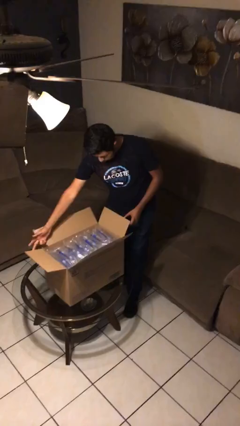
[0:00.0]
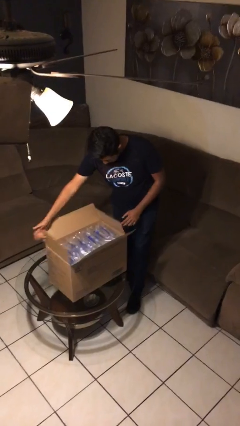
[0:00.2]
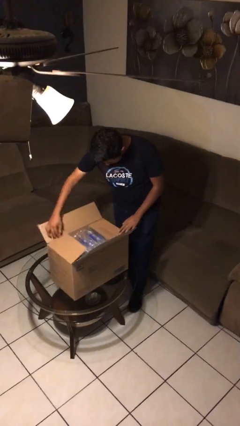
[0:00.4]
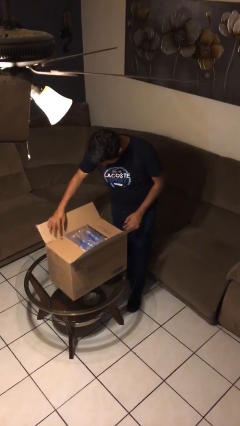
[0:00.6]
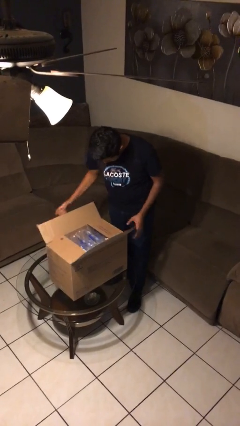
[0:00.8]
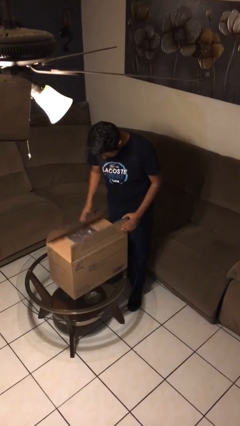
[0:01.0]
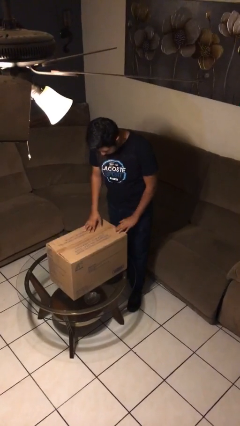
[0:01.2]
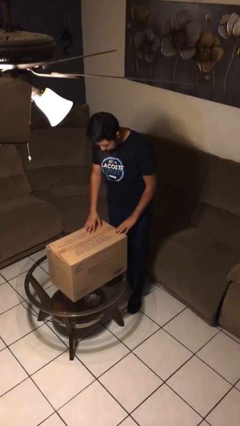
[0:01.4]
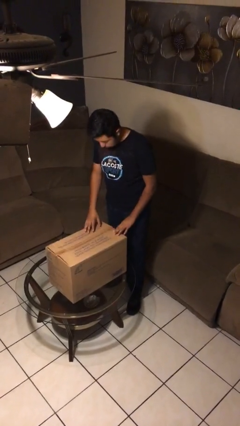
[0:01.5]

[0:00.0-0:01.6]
person closes box

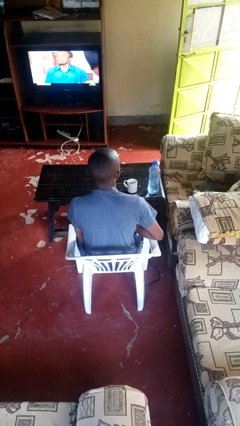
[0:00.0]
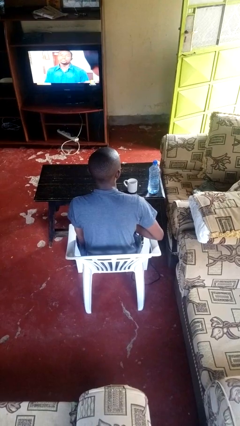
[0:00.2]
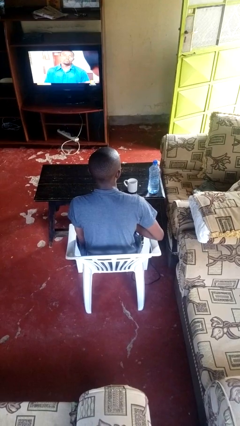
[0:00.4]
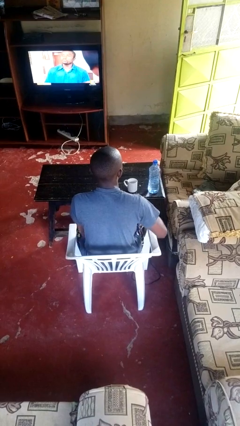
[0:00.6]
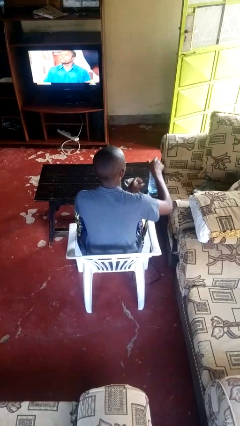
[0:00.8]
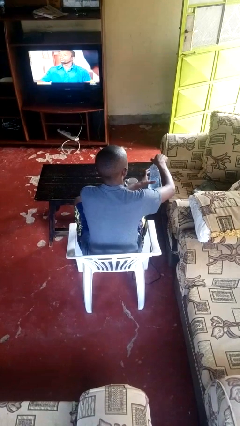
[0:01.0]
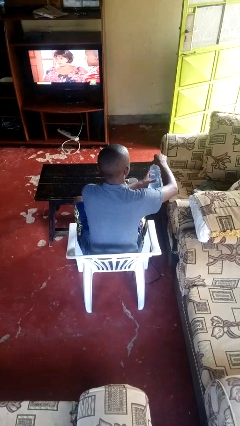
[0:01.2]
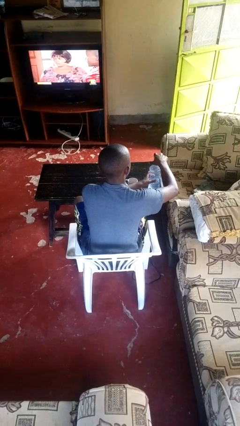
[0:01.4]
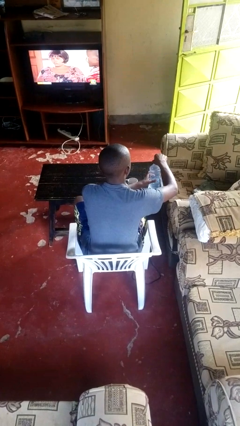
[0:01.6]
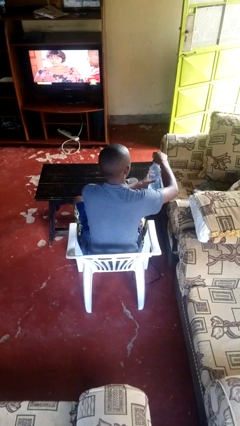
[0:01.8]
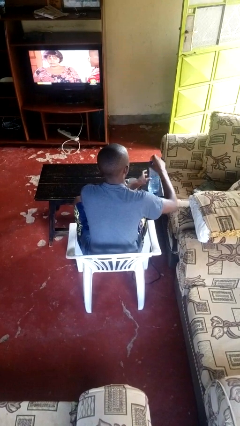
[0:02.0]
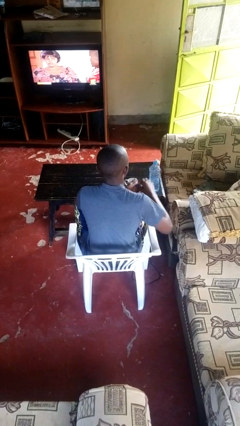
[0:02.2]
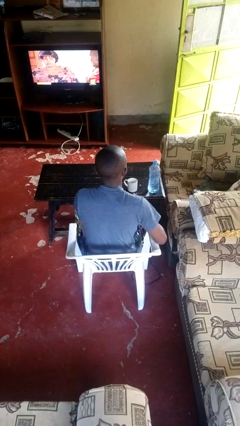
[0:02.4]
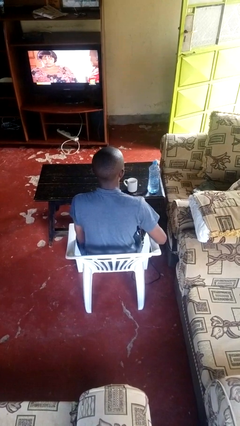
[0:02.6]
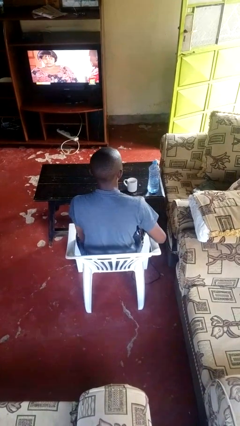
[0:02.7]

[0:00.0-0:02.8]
person unscrews lid from bottle

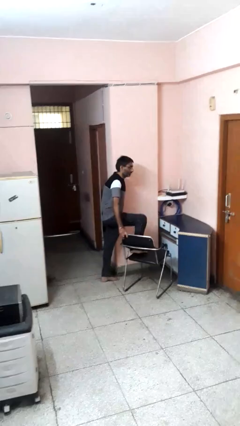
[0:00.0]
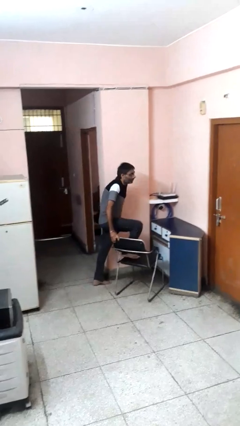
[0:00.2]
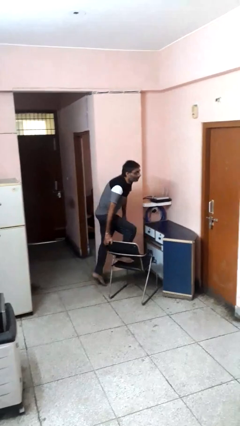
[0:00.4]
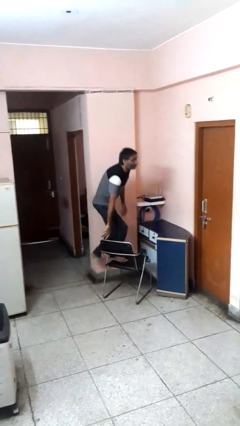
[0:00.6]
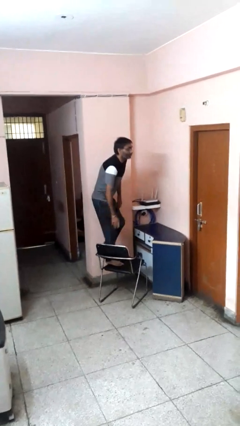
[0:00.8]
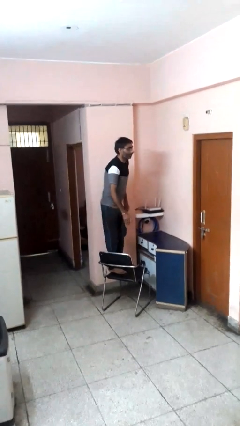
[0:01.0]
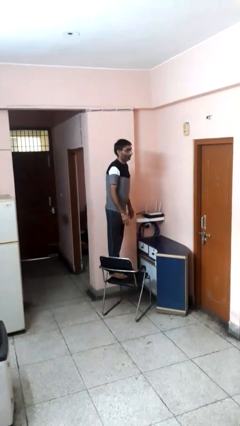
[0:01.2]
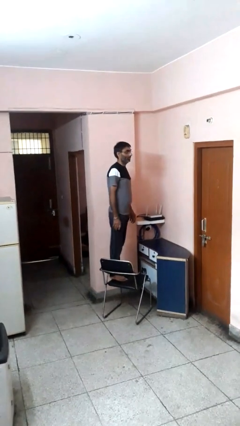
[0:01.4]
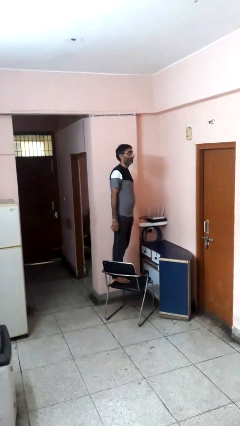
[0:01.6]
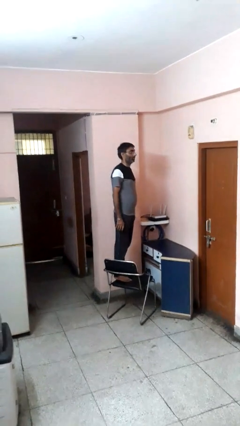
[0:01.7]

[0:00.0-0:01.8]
person climbs on chair

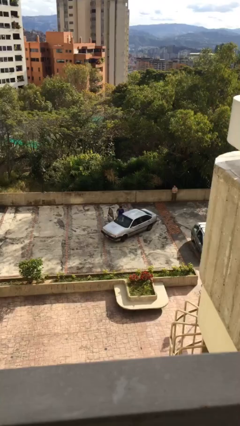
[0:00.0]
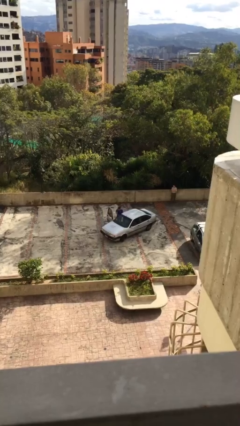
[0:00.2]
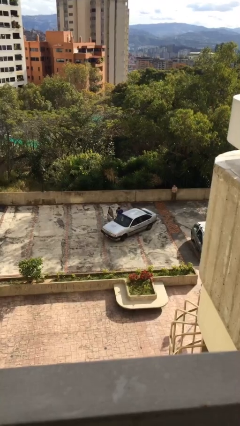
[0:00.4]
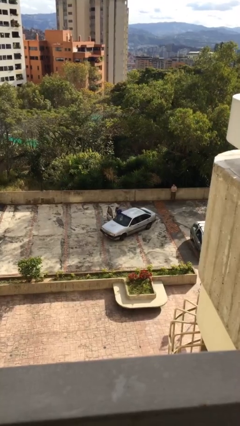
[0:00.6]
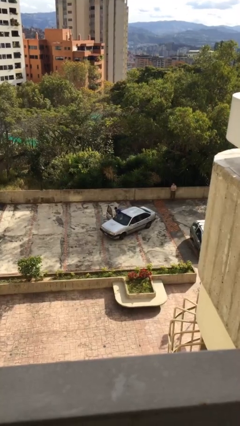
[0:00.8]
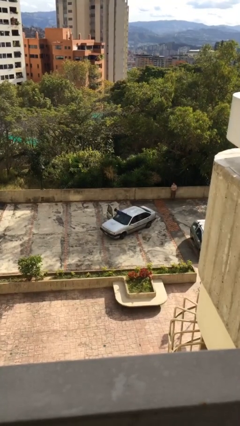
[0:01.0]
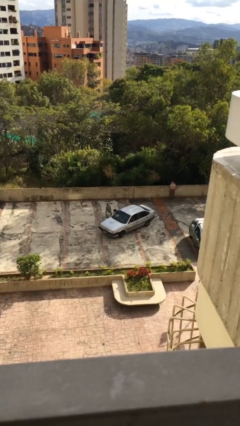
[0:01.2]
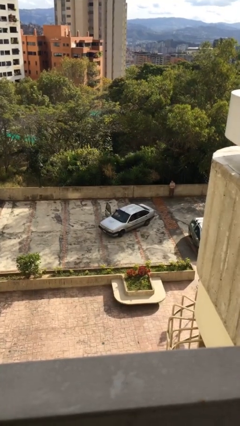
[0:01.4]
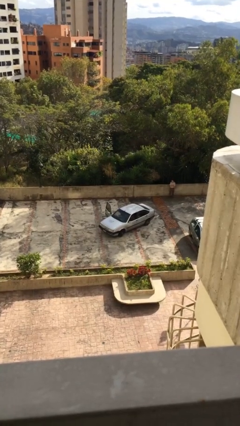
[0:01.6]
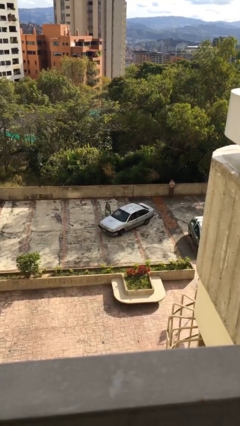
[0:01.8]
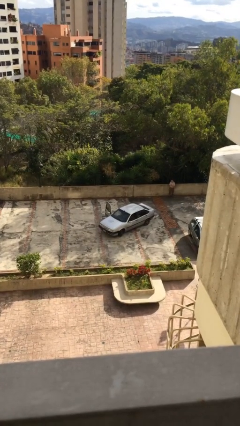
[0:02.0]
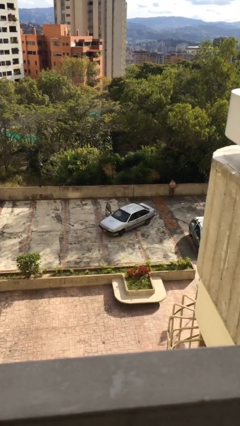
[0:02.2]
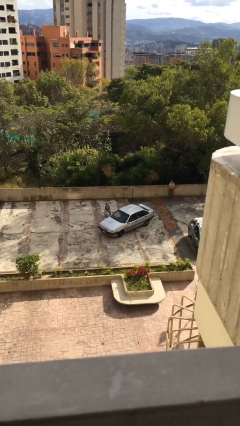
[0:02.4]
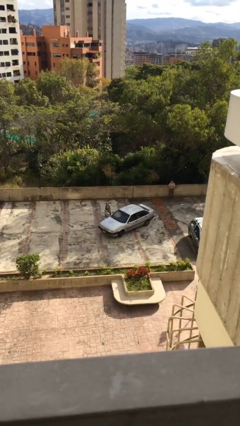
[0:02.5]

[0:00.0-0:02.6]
person enters car

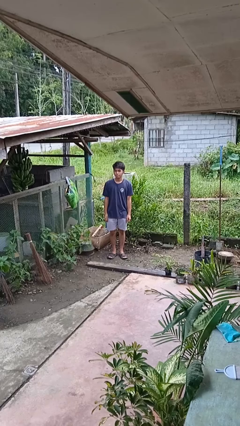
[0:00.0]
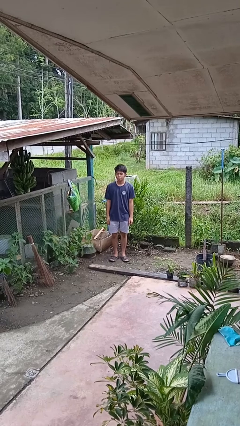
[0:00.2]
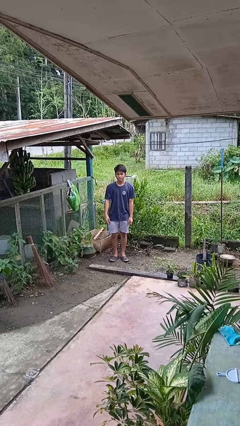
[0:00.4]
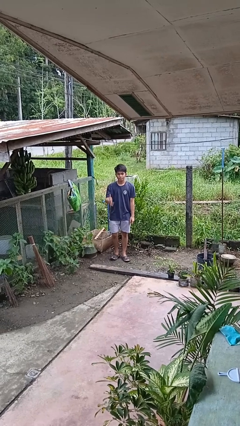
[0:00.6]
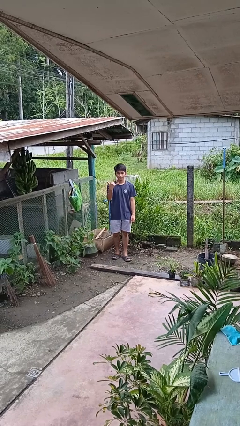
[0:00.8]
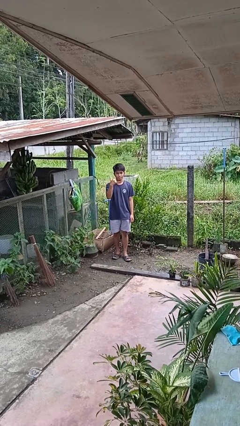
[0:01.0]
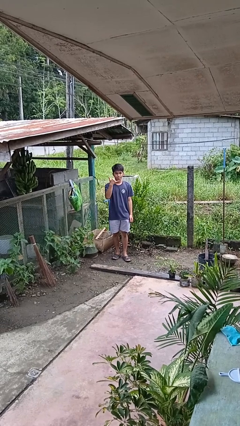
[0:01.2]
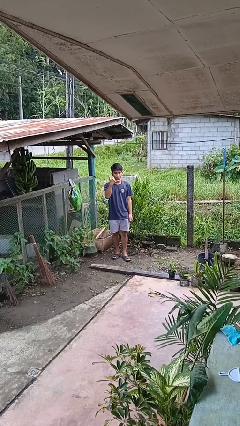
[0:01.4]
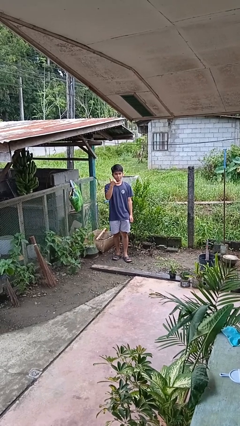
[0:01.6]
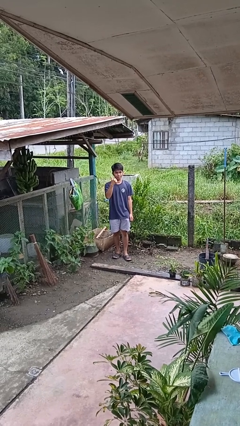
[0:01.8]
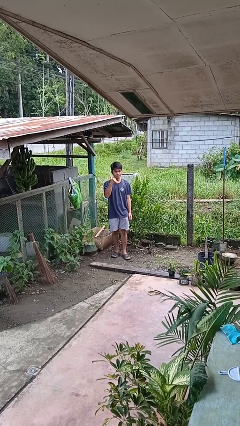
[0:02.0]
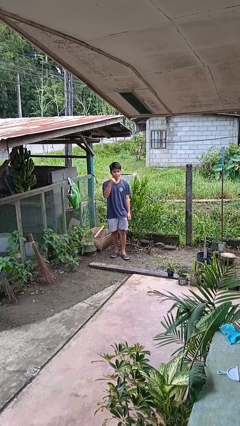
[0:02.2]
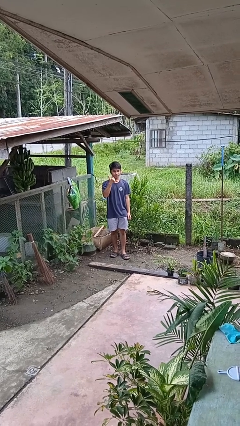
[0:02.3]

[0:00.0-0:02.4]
person gestures hang loose

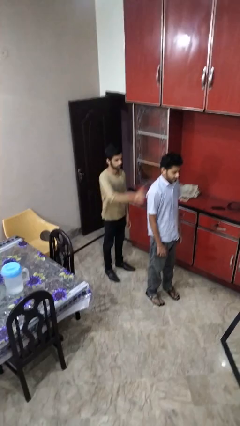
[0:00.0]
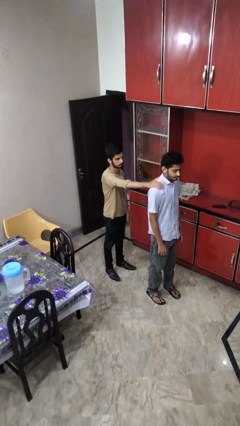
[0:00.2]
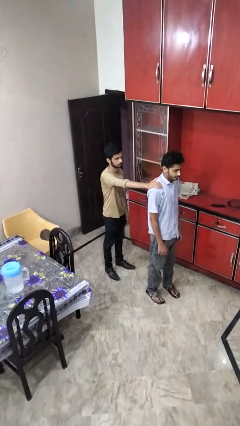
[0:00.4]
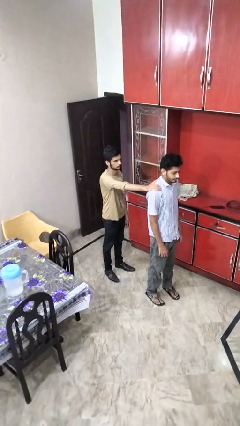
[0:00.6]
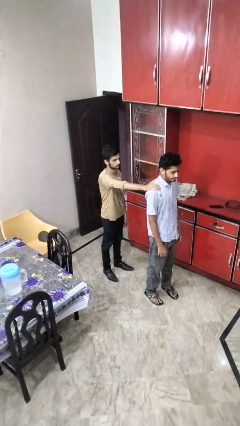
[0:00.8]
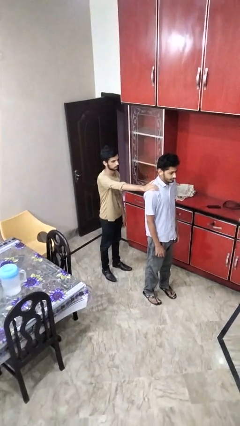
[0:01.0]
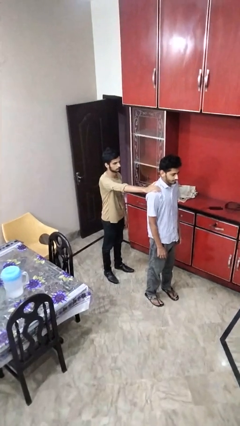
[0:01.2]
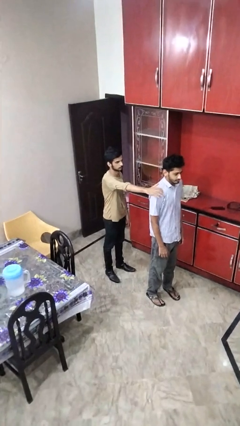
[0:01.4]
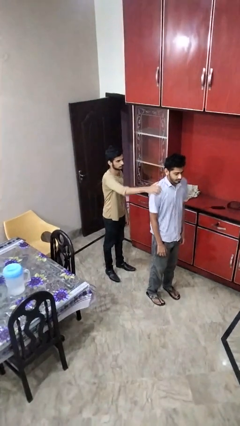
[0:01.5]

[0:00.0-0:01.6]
person grabs person by shoulder

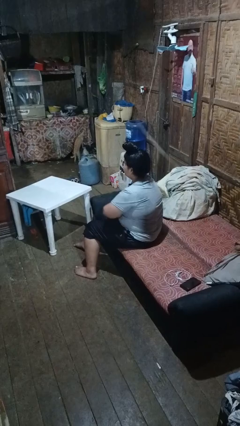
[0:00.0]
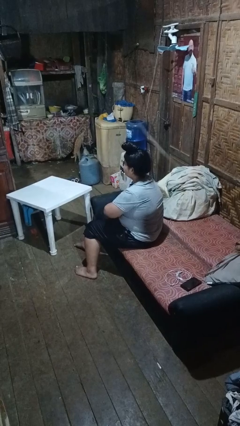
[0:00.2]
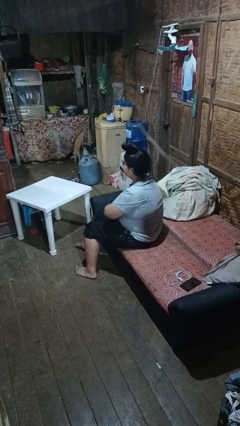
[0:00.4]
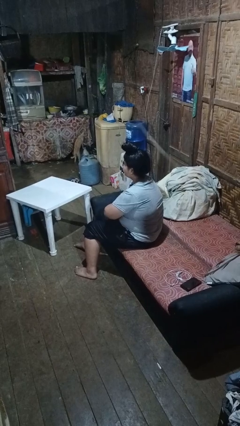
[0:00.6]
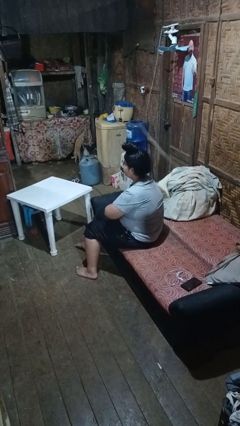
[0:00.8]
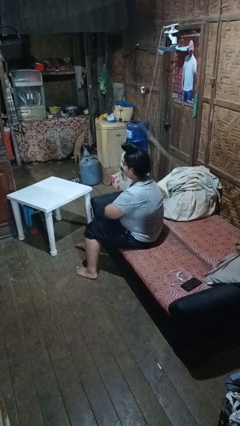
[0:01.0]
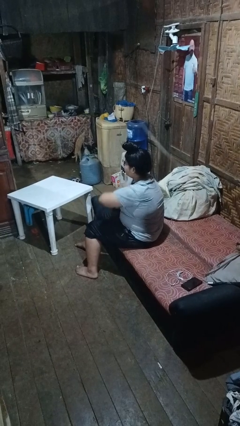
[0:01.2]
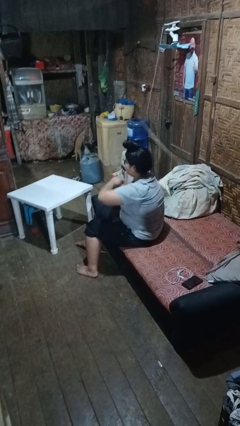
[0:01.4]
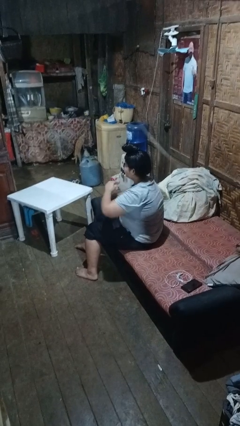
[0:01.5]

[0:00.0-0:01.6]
person crosses arms

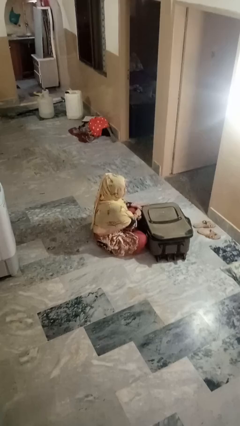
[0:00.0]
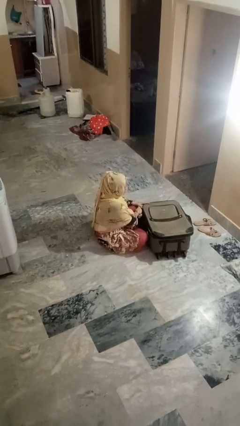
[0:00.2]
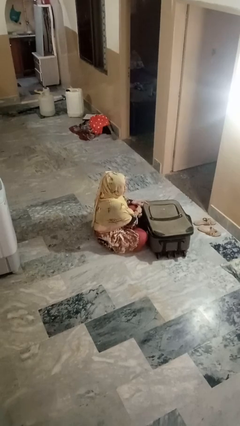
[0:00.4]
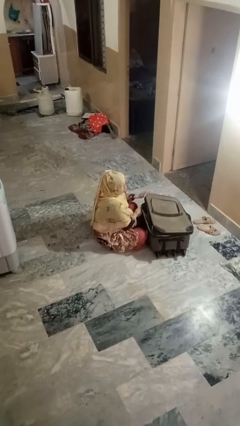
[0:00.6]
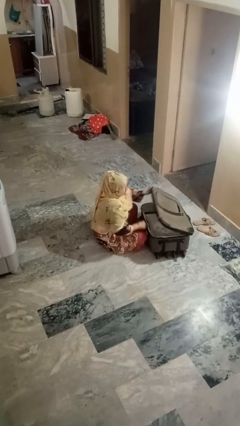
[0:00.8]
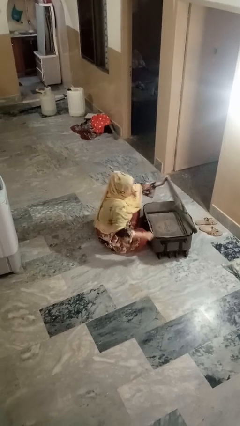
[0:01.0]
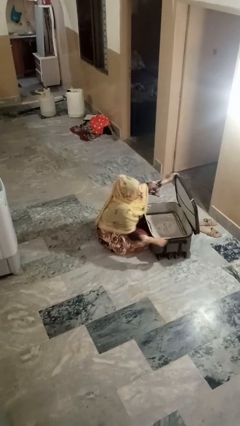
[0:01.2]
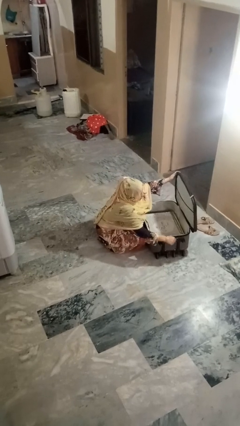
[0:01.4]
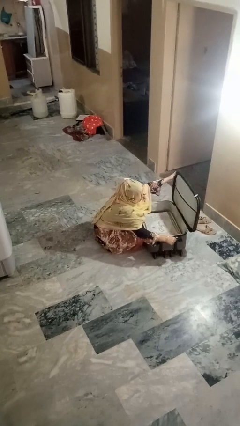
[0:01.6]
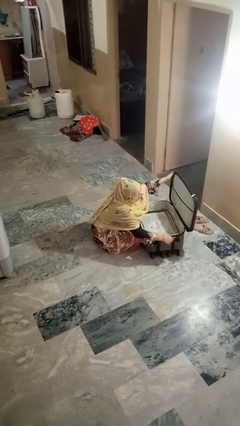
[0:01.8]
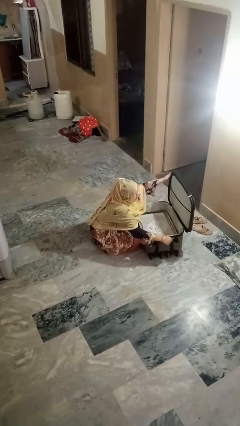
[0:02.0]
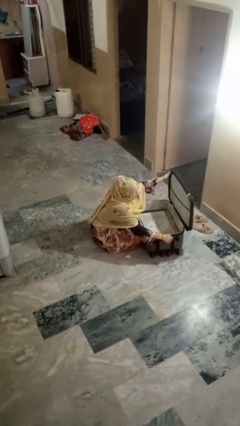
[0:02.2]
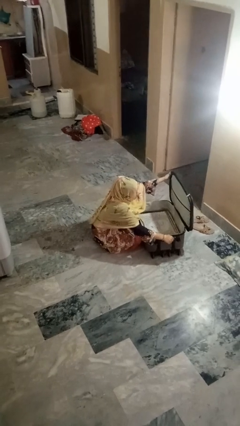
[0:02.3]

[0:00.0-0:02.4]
person opens suitcase
